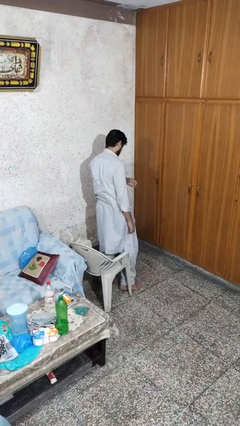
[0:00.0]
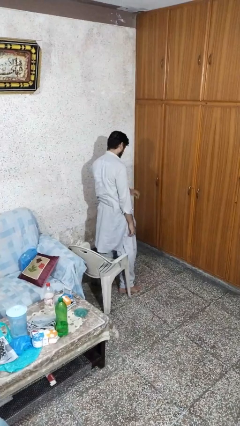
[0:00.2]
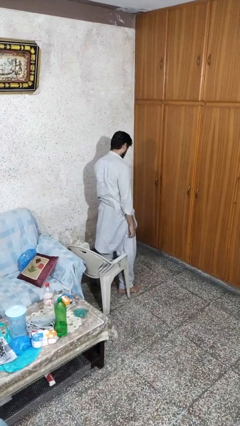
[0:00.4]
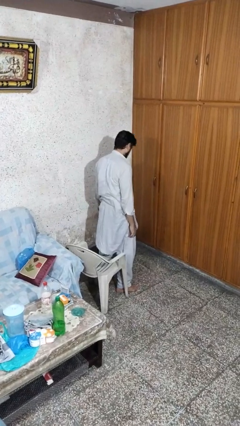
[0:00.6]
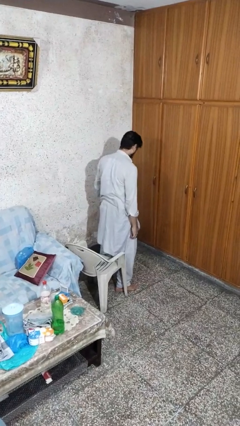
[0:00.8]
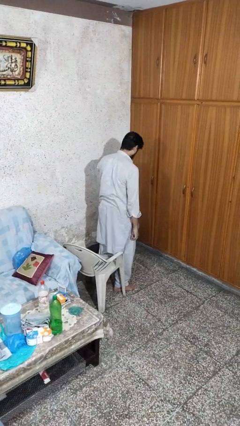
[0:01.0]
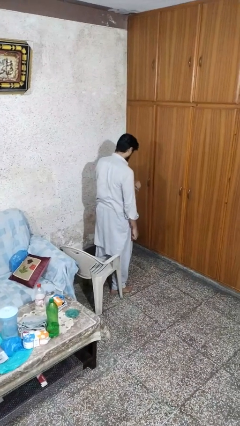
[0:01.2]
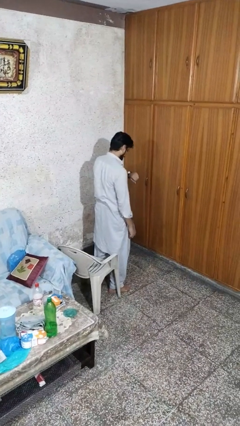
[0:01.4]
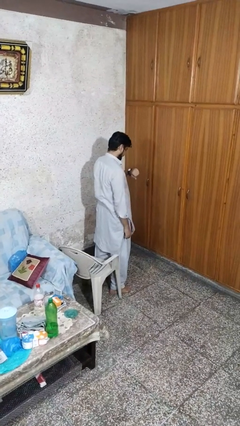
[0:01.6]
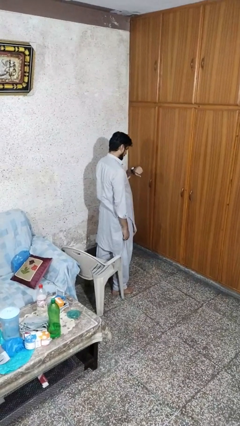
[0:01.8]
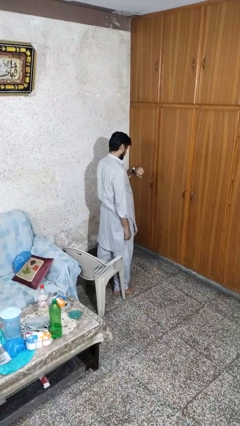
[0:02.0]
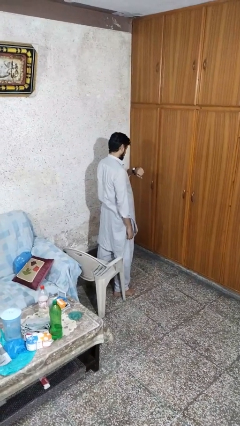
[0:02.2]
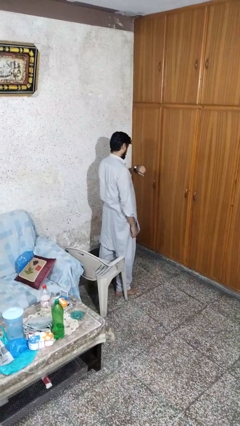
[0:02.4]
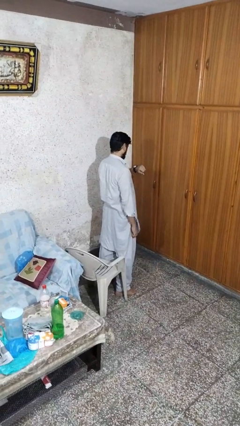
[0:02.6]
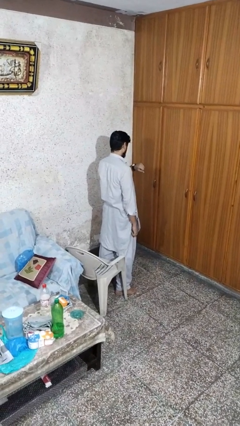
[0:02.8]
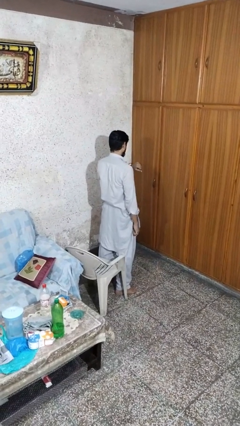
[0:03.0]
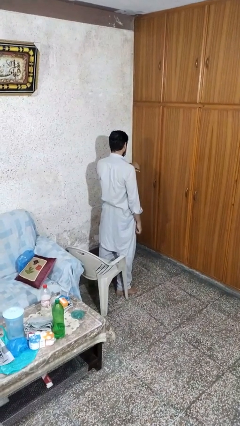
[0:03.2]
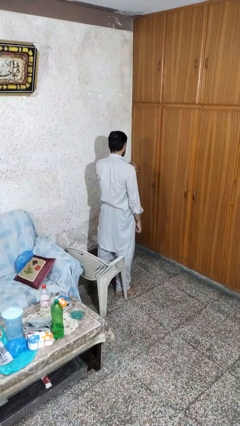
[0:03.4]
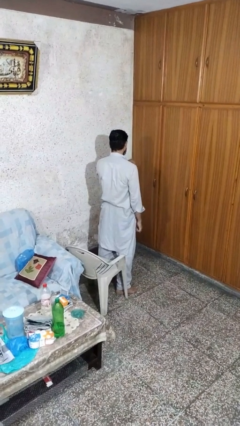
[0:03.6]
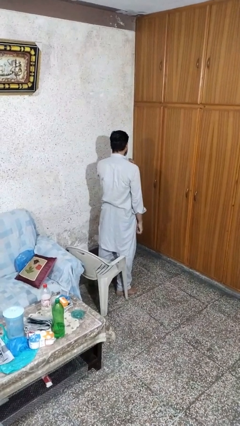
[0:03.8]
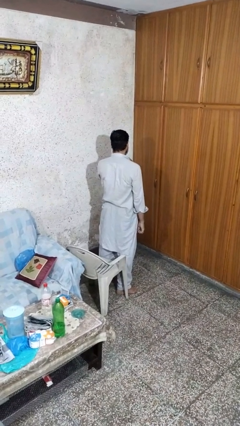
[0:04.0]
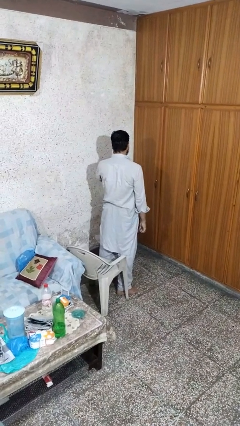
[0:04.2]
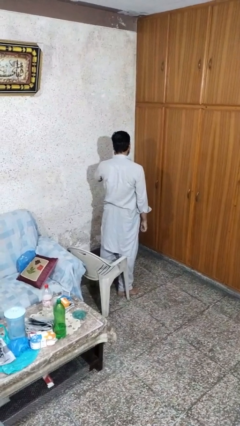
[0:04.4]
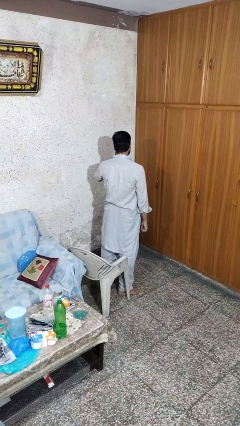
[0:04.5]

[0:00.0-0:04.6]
person looks at wristwatch

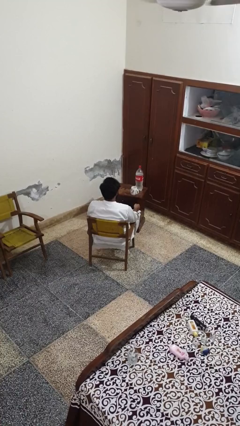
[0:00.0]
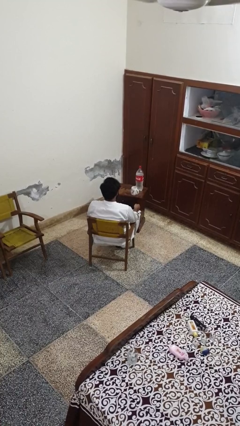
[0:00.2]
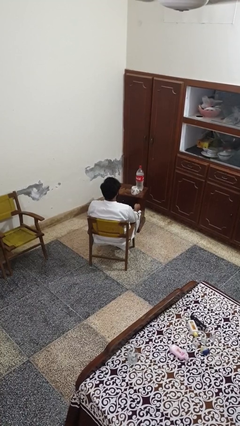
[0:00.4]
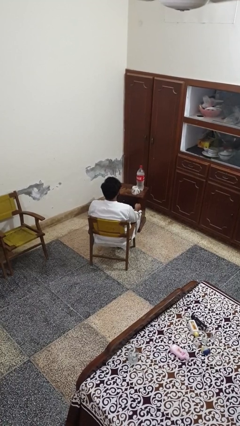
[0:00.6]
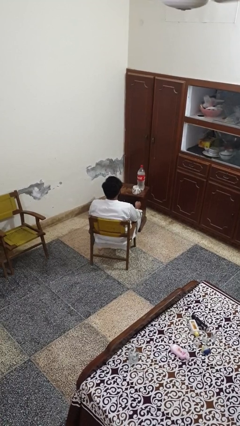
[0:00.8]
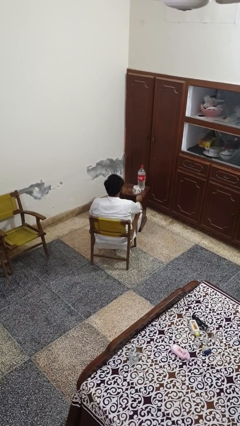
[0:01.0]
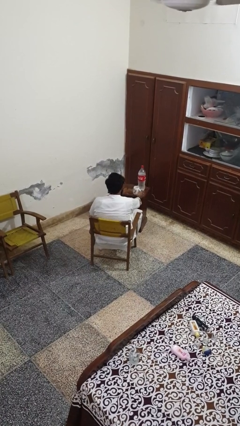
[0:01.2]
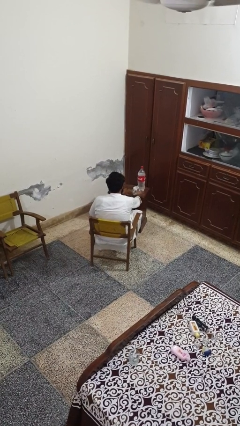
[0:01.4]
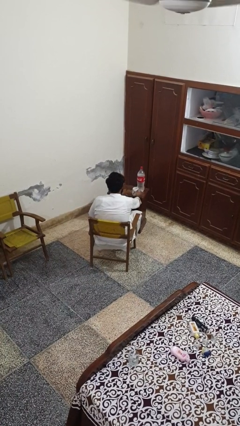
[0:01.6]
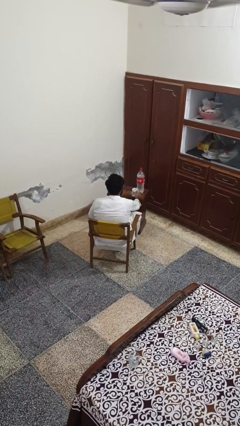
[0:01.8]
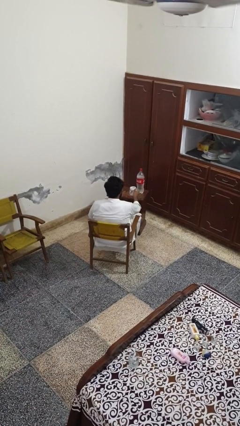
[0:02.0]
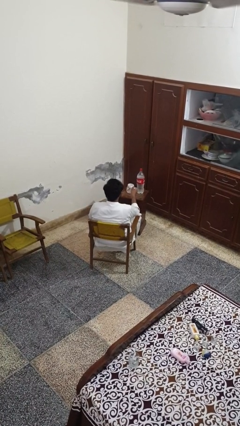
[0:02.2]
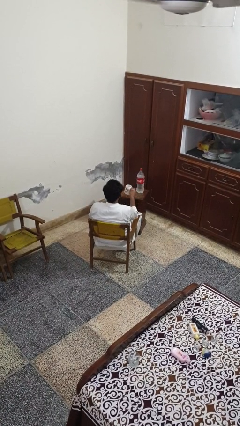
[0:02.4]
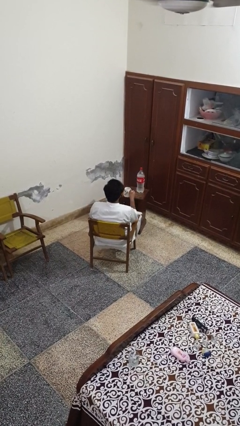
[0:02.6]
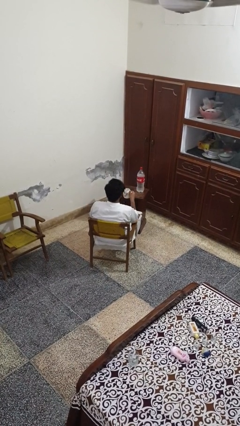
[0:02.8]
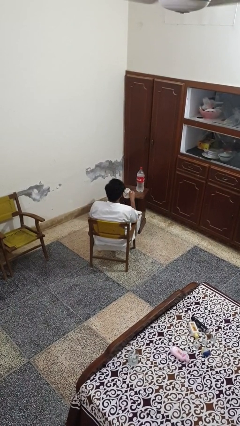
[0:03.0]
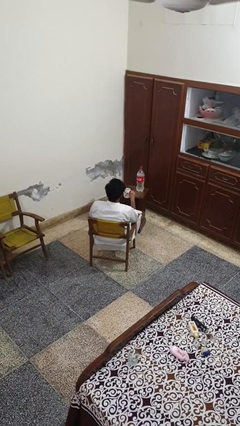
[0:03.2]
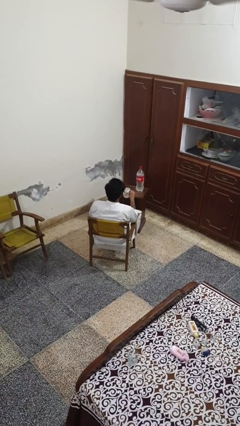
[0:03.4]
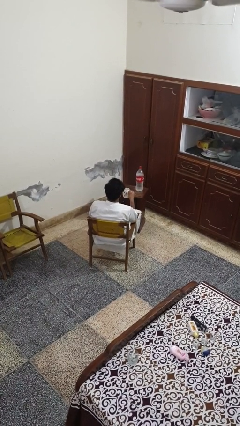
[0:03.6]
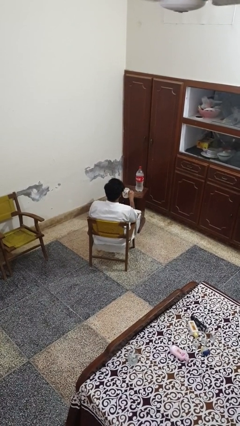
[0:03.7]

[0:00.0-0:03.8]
person picks up object from table

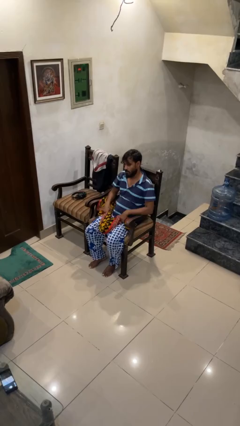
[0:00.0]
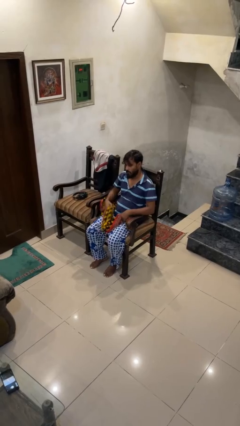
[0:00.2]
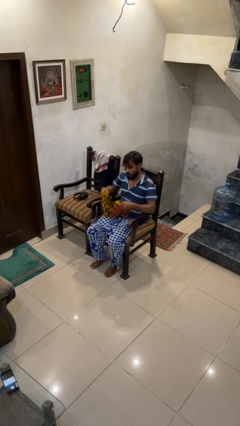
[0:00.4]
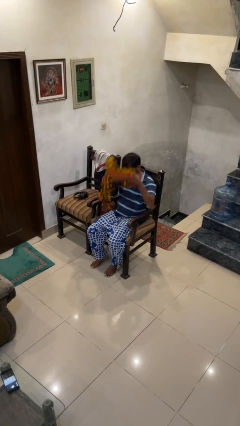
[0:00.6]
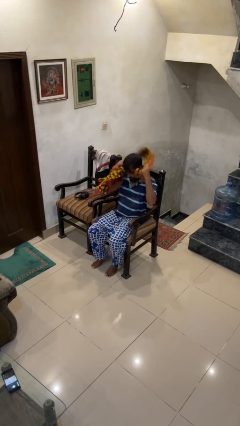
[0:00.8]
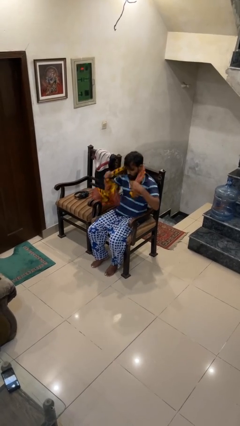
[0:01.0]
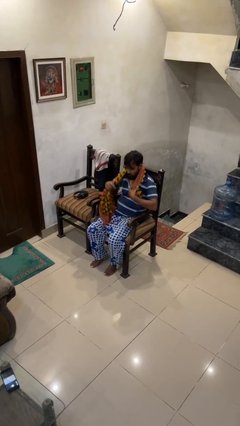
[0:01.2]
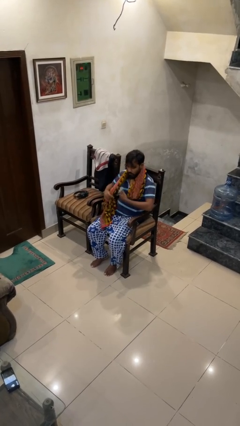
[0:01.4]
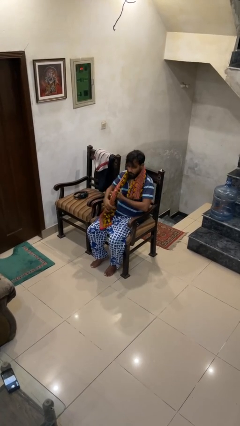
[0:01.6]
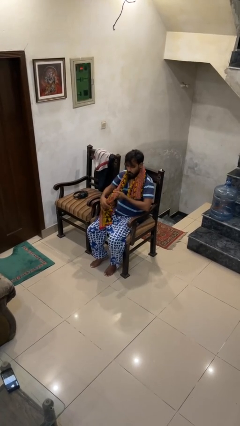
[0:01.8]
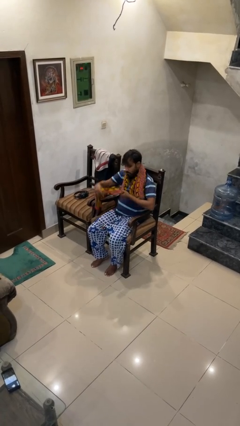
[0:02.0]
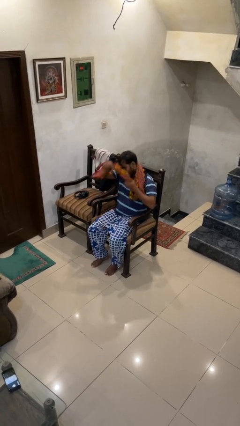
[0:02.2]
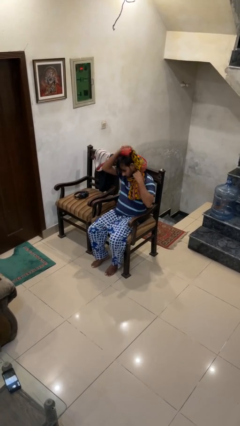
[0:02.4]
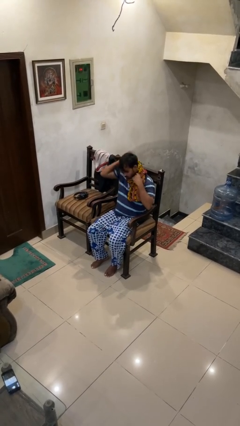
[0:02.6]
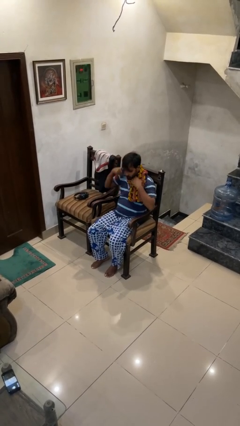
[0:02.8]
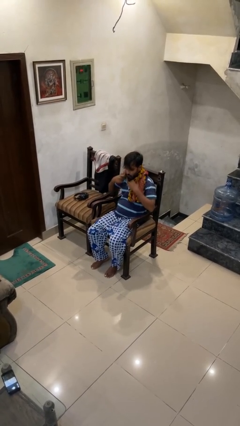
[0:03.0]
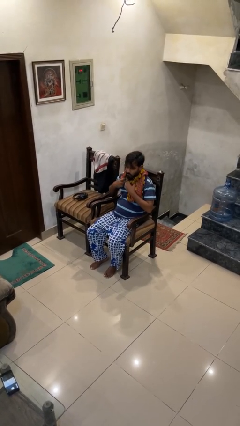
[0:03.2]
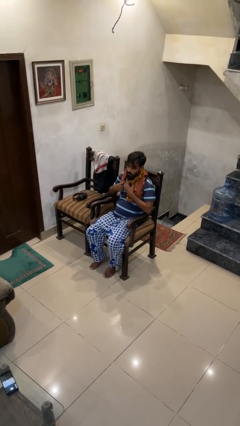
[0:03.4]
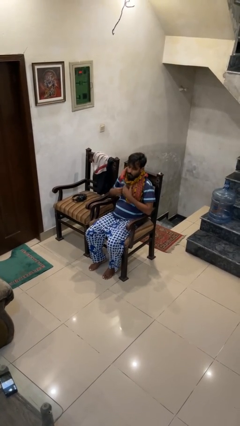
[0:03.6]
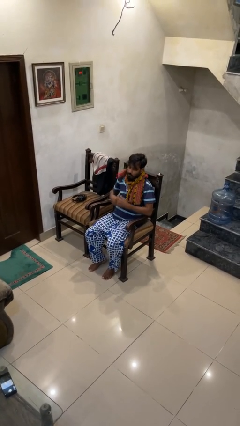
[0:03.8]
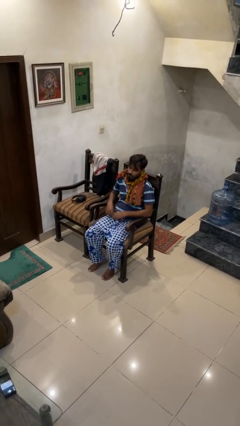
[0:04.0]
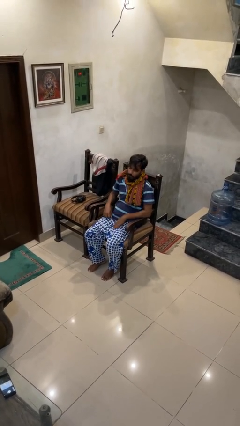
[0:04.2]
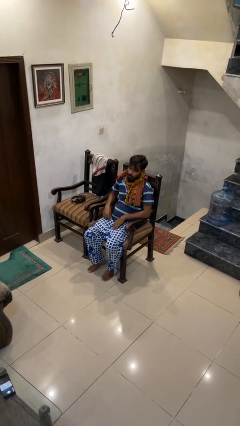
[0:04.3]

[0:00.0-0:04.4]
person puts on scarf

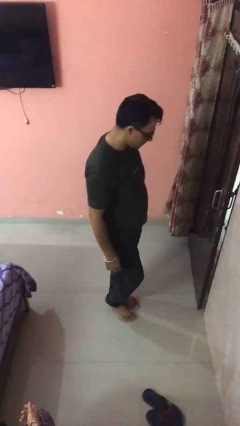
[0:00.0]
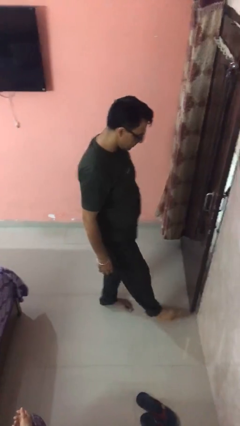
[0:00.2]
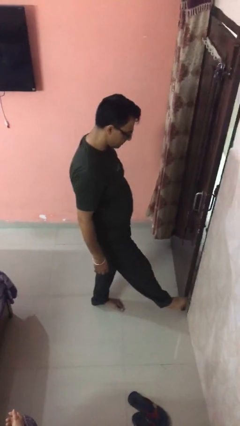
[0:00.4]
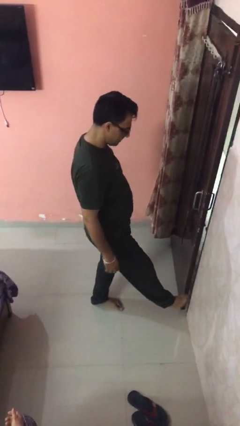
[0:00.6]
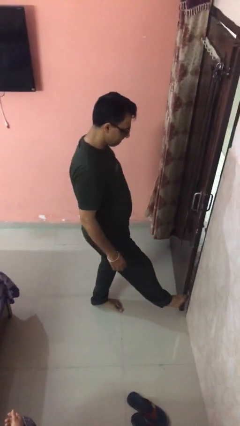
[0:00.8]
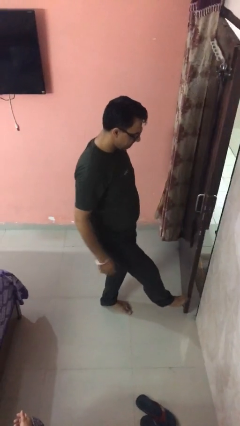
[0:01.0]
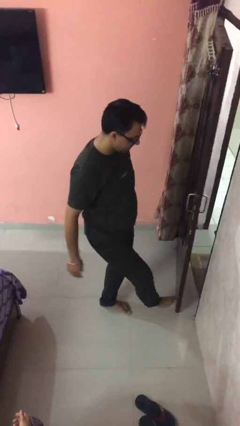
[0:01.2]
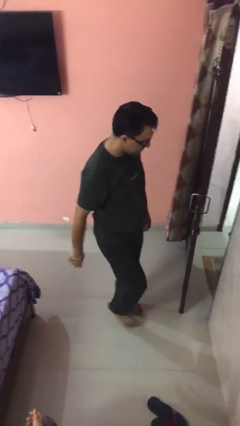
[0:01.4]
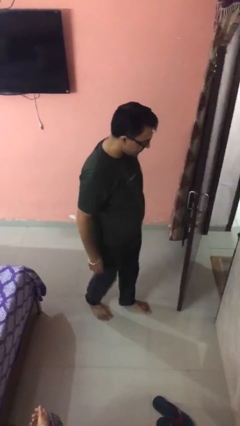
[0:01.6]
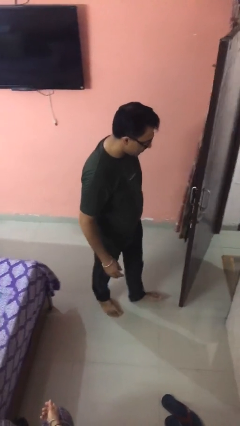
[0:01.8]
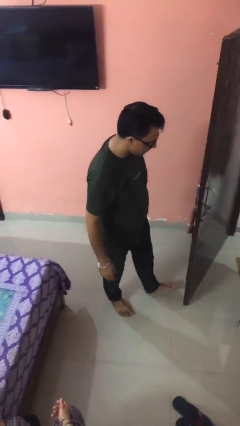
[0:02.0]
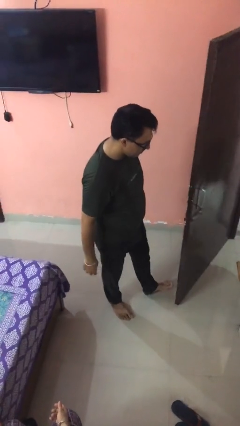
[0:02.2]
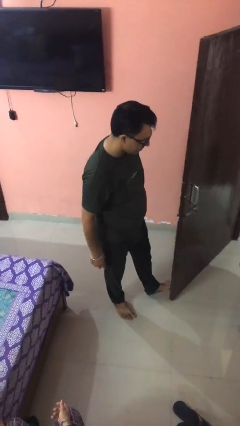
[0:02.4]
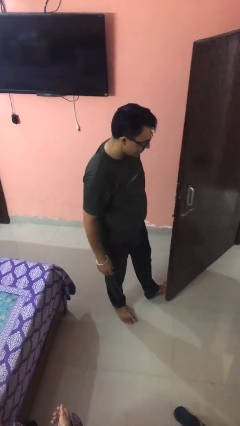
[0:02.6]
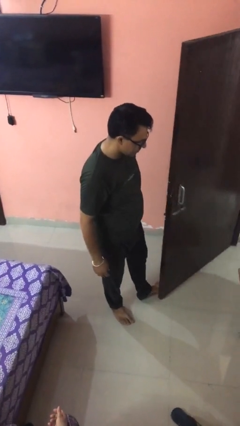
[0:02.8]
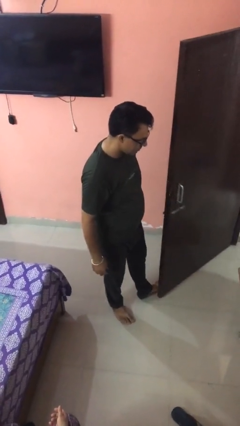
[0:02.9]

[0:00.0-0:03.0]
person opens facility door

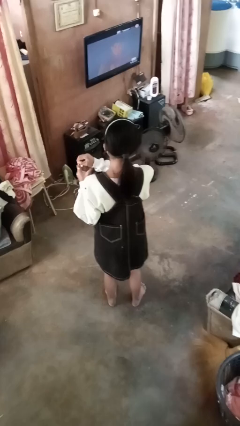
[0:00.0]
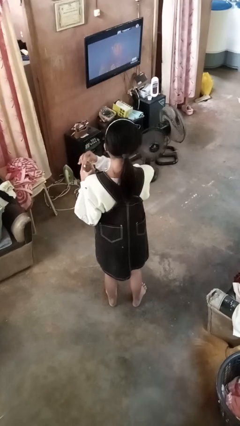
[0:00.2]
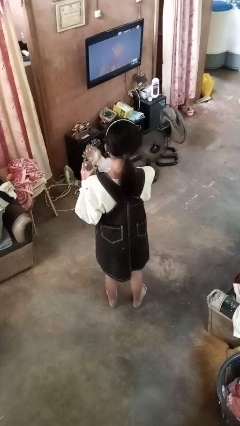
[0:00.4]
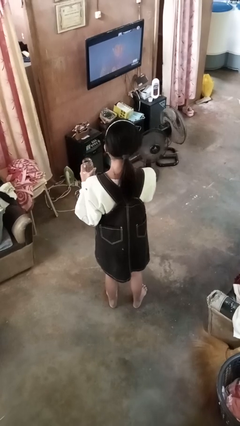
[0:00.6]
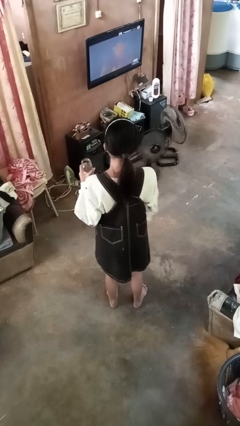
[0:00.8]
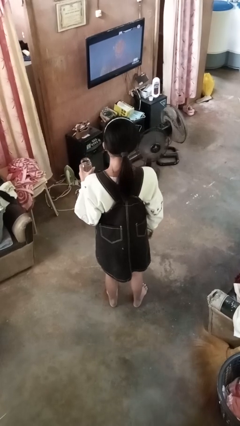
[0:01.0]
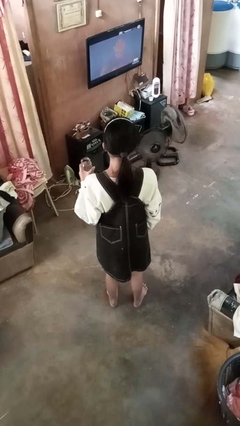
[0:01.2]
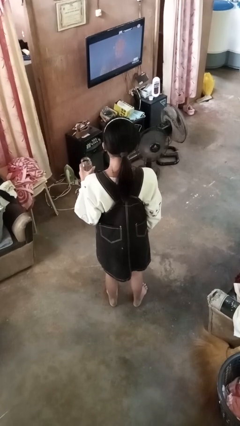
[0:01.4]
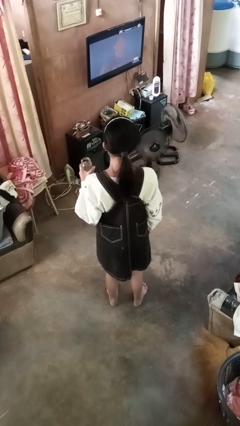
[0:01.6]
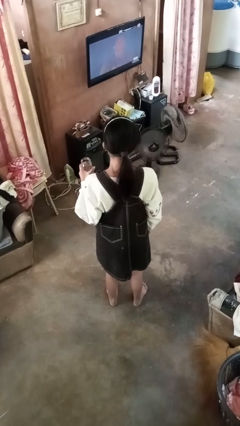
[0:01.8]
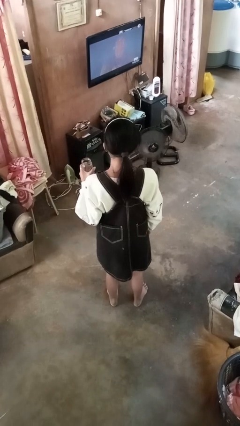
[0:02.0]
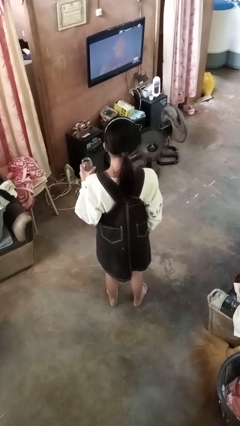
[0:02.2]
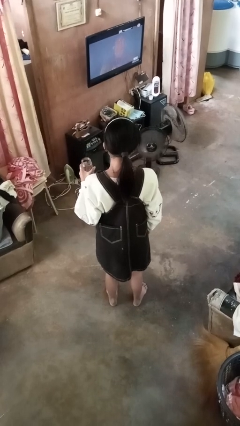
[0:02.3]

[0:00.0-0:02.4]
person opens jar
